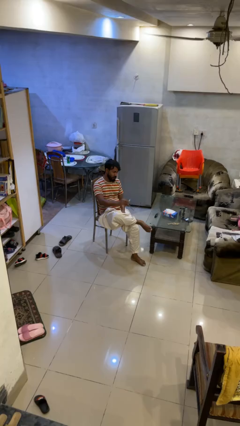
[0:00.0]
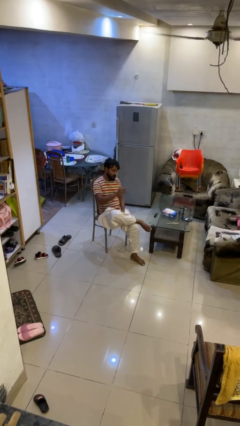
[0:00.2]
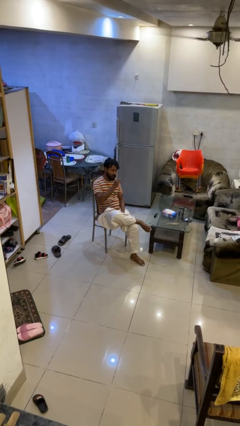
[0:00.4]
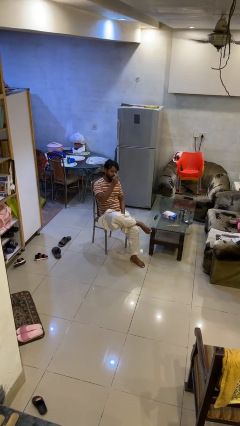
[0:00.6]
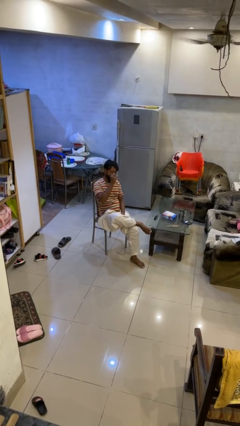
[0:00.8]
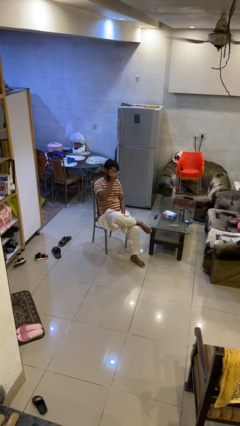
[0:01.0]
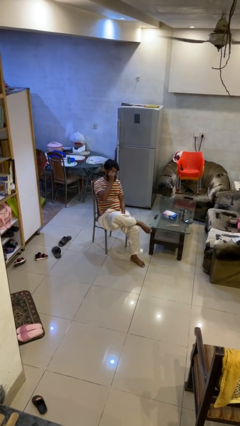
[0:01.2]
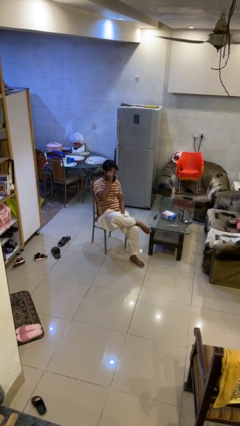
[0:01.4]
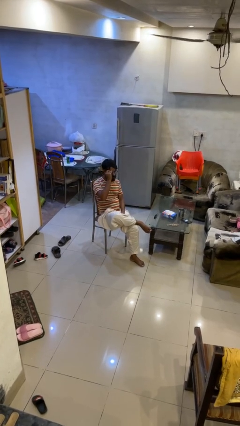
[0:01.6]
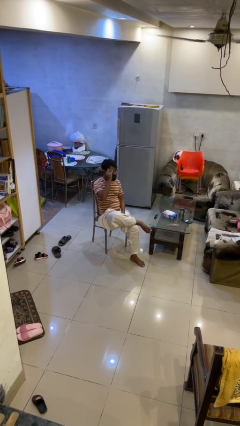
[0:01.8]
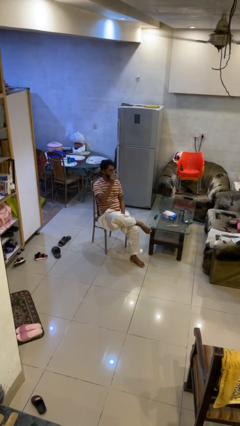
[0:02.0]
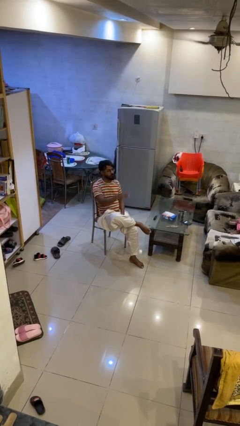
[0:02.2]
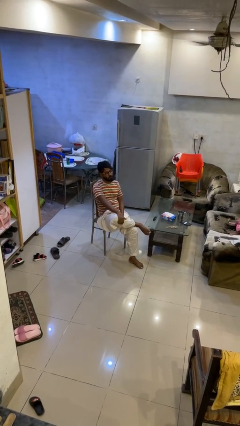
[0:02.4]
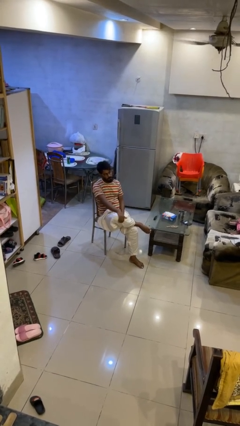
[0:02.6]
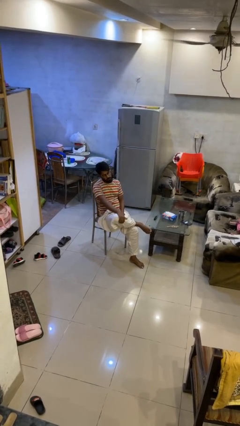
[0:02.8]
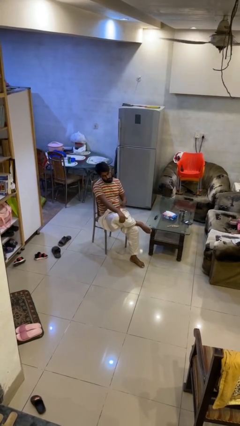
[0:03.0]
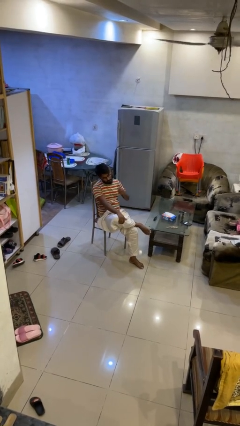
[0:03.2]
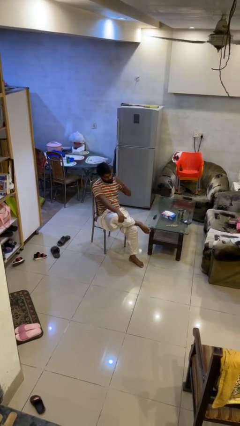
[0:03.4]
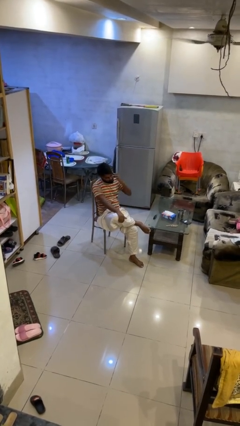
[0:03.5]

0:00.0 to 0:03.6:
person puts on glasses

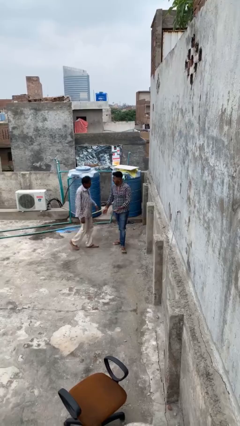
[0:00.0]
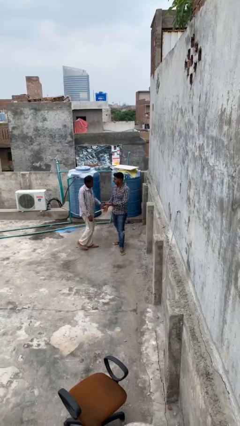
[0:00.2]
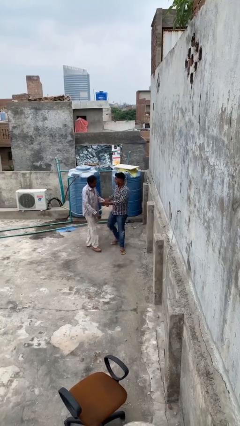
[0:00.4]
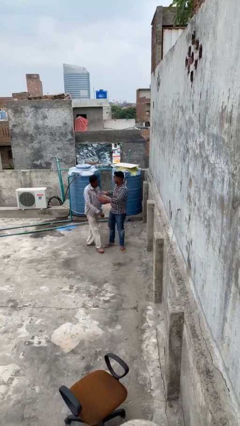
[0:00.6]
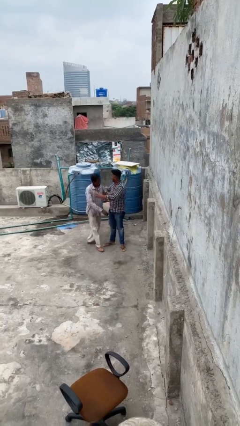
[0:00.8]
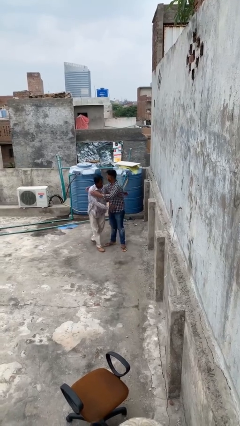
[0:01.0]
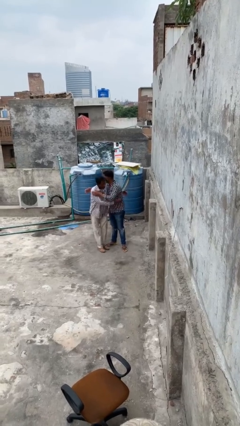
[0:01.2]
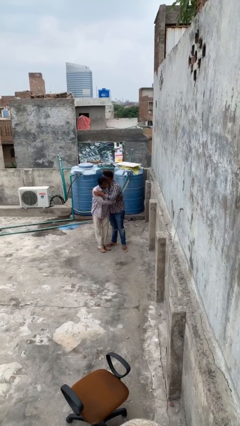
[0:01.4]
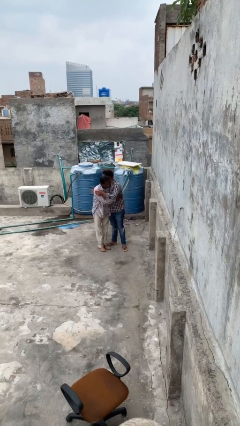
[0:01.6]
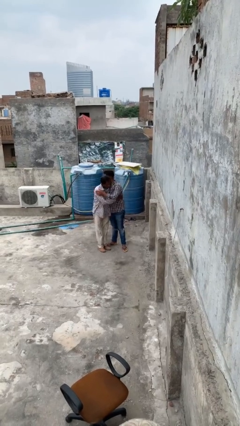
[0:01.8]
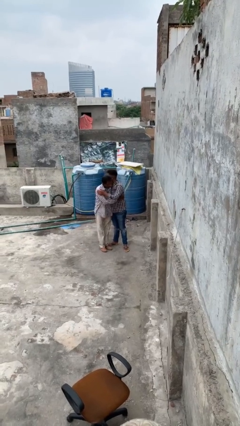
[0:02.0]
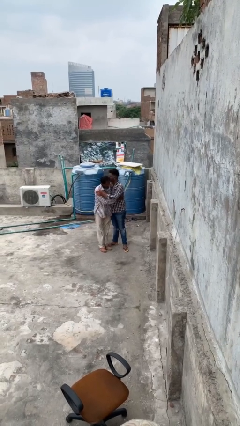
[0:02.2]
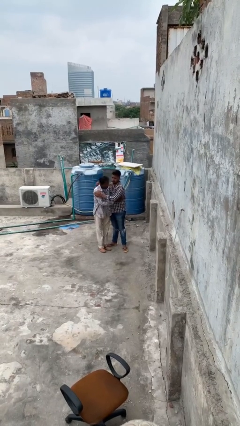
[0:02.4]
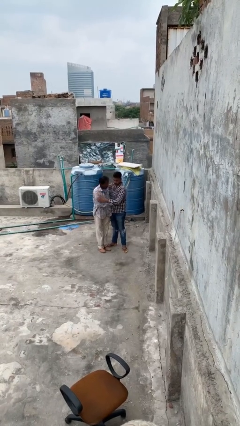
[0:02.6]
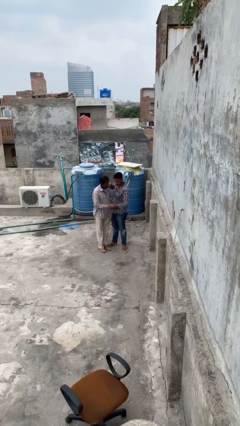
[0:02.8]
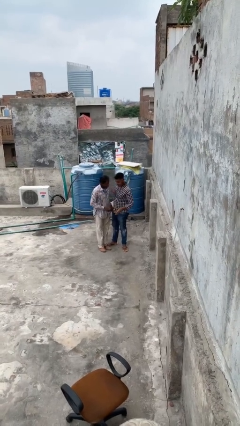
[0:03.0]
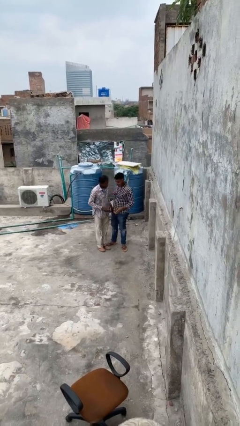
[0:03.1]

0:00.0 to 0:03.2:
person embraces person

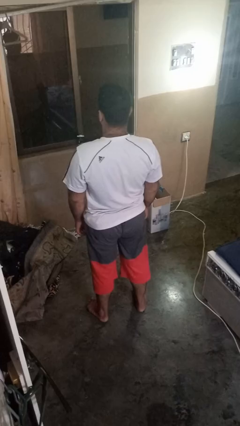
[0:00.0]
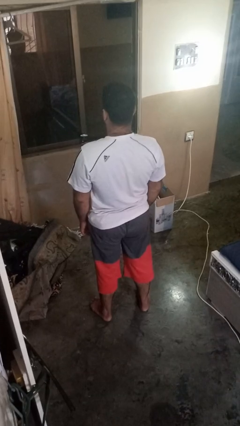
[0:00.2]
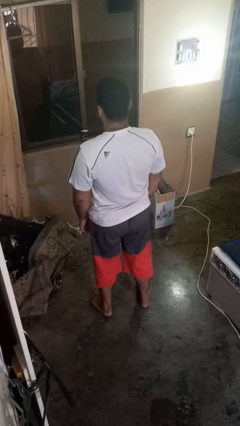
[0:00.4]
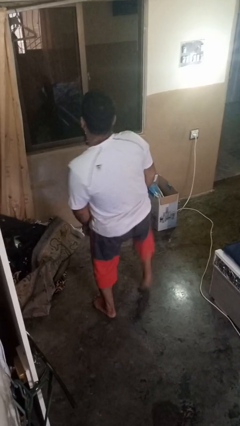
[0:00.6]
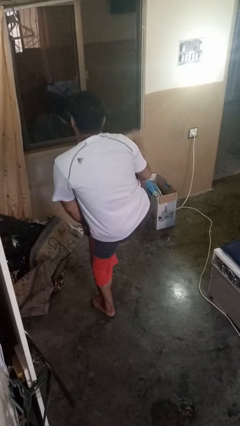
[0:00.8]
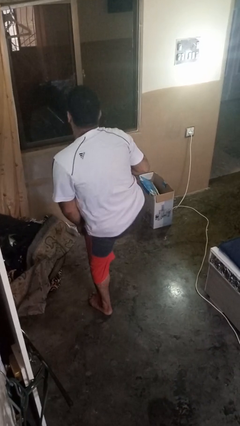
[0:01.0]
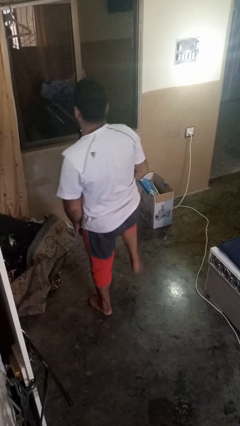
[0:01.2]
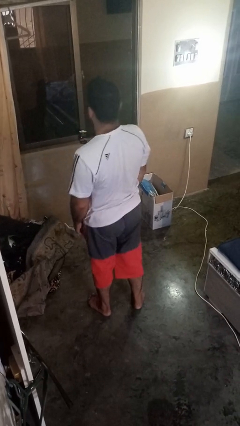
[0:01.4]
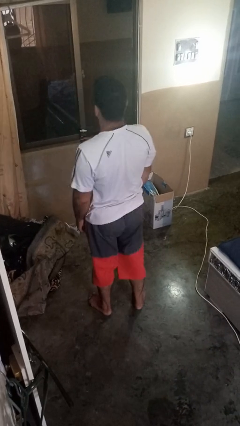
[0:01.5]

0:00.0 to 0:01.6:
person karate kicks

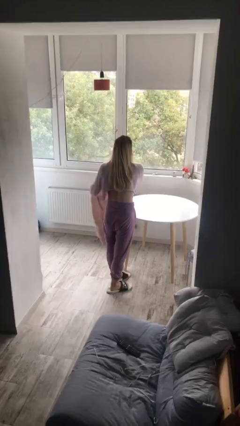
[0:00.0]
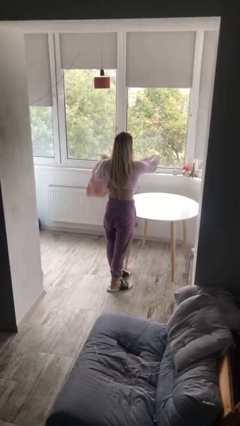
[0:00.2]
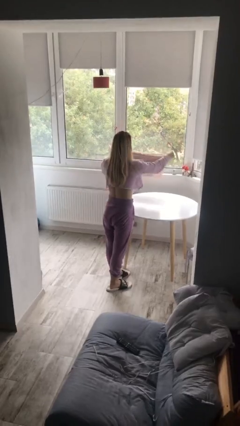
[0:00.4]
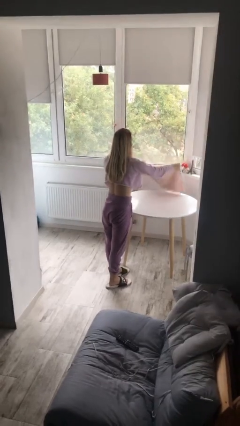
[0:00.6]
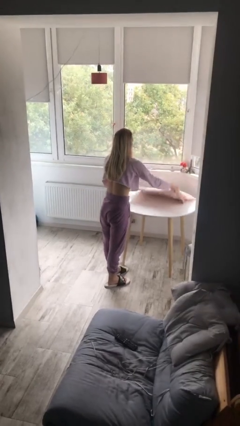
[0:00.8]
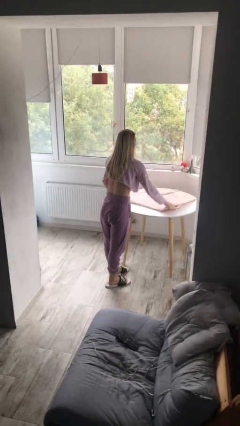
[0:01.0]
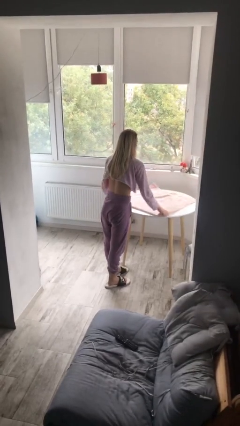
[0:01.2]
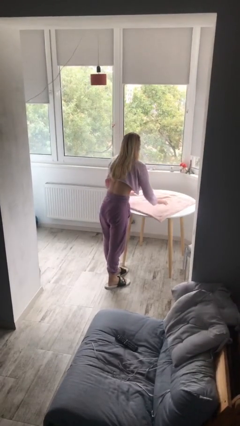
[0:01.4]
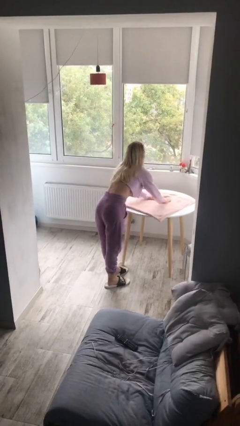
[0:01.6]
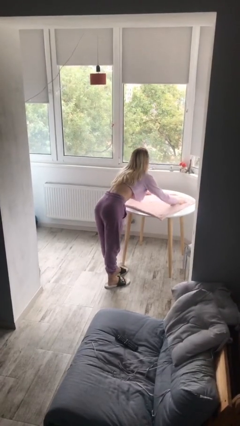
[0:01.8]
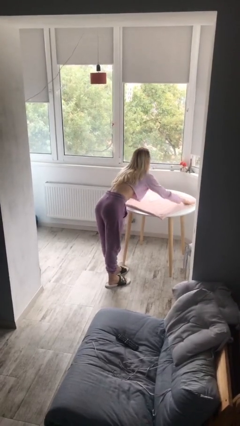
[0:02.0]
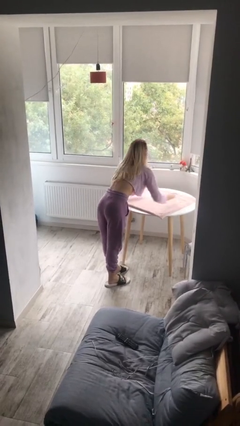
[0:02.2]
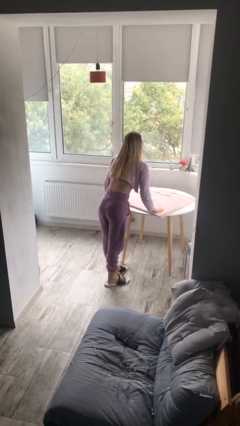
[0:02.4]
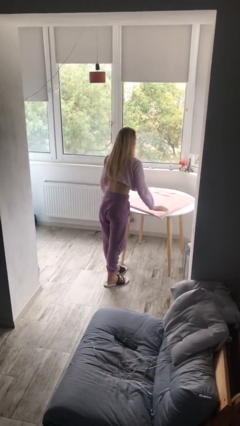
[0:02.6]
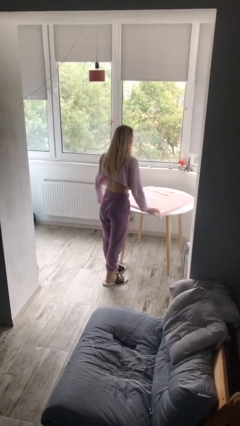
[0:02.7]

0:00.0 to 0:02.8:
person spreads tablecloth

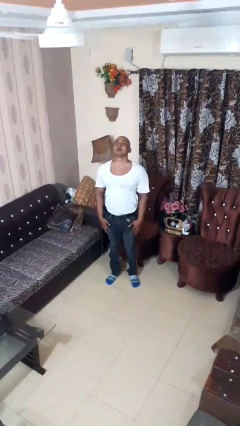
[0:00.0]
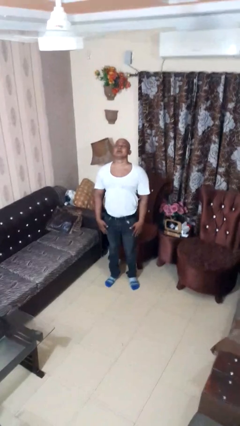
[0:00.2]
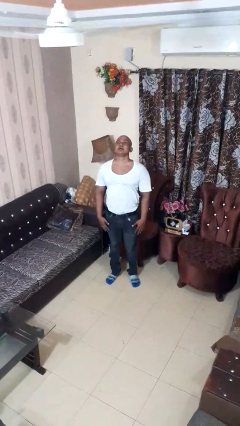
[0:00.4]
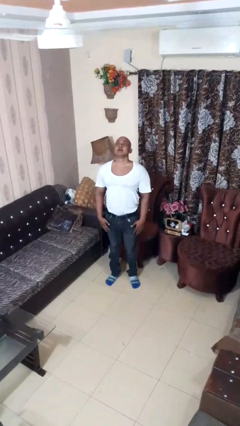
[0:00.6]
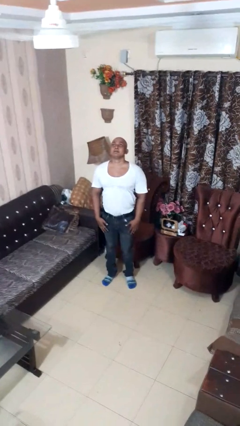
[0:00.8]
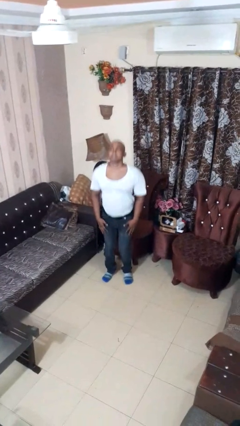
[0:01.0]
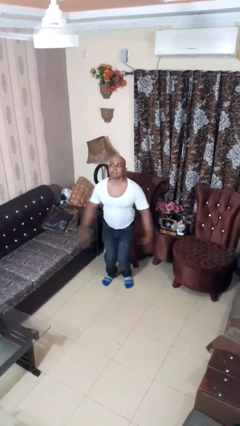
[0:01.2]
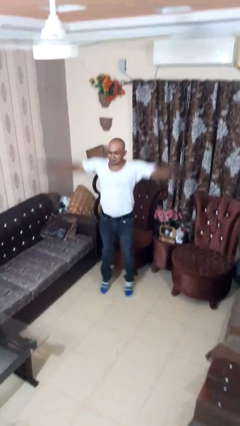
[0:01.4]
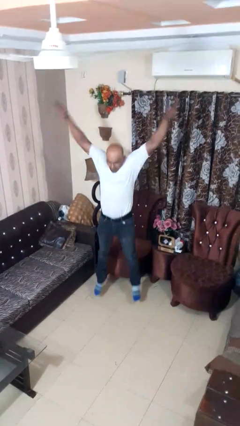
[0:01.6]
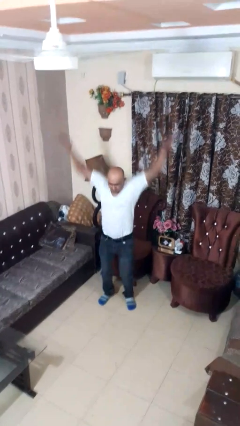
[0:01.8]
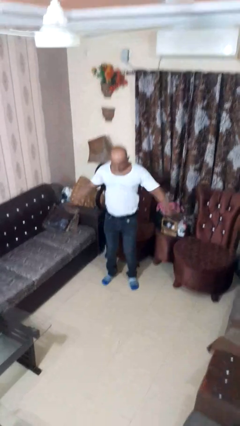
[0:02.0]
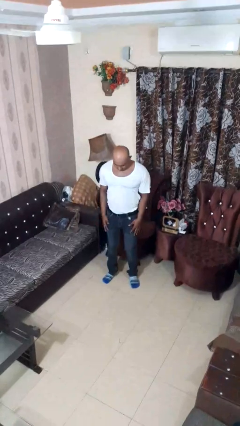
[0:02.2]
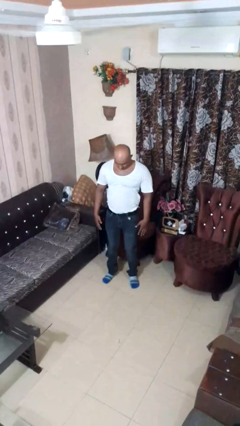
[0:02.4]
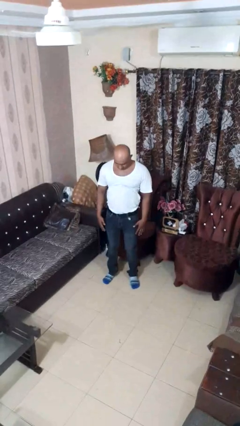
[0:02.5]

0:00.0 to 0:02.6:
person exercises with jumping jacks

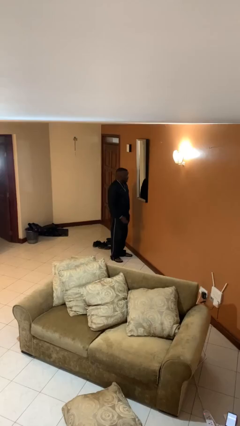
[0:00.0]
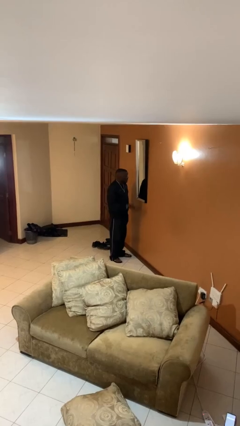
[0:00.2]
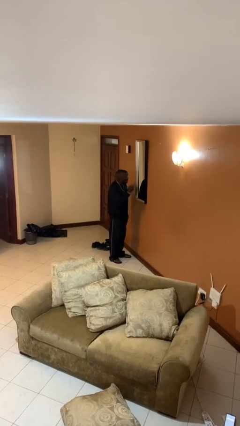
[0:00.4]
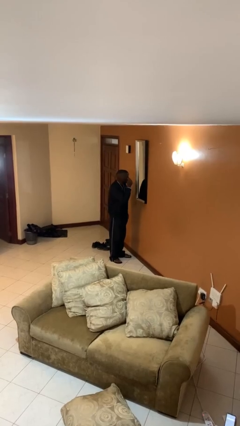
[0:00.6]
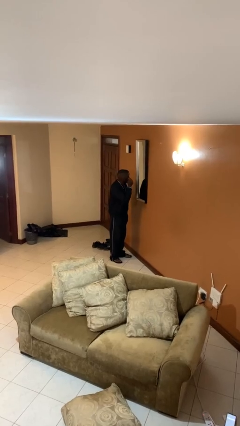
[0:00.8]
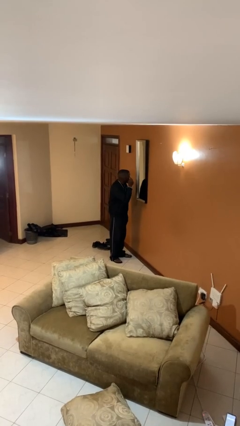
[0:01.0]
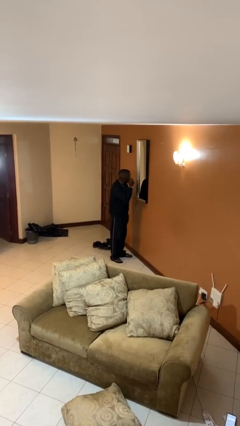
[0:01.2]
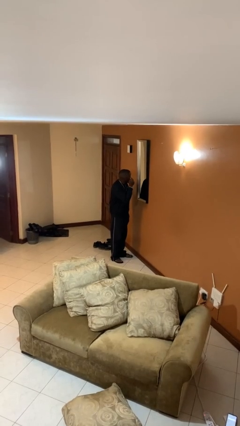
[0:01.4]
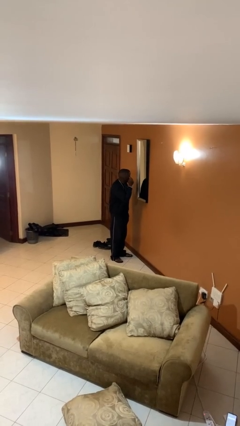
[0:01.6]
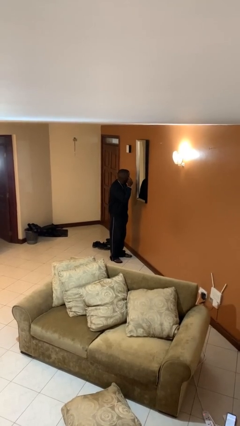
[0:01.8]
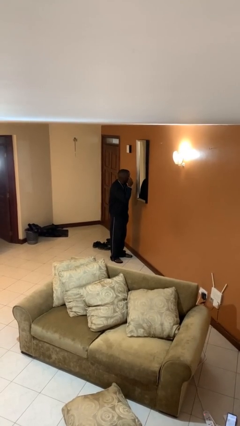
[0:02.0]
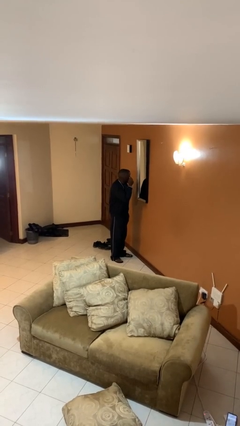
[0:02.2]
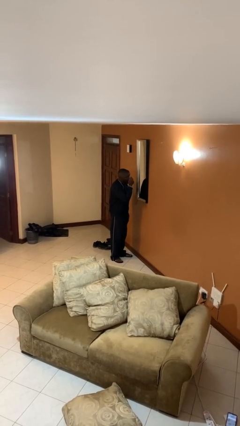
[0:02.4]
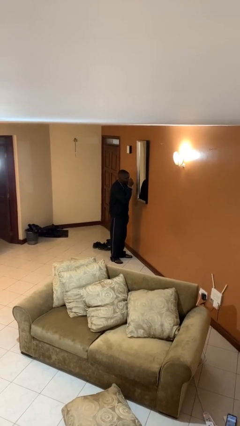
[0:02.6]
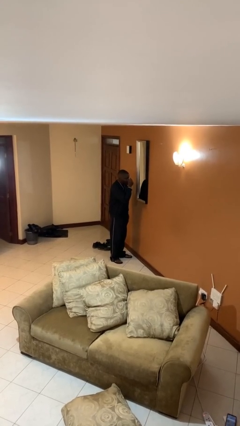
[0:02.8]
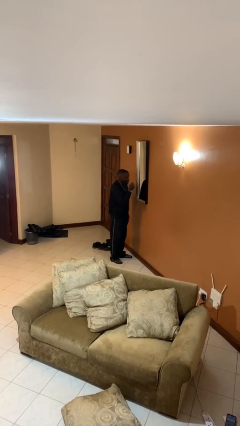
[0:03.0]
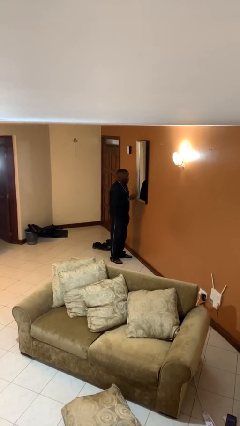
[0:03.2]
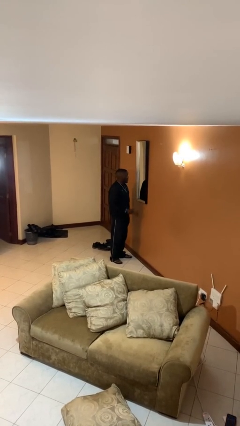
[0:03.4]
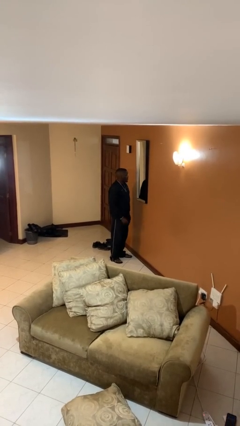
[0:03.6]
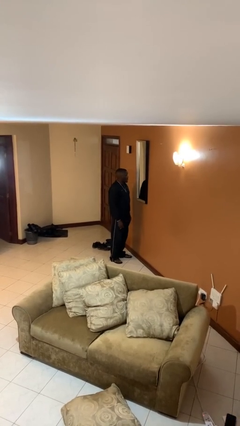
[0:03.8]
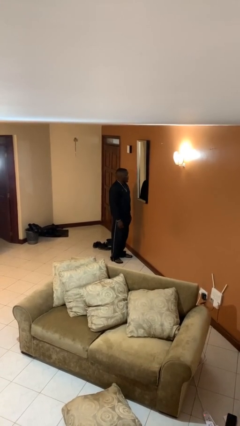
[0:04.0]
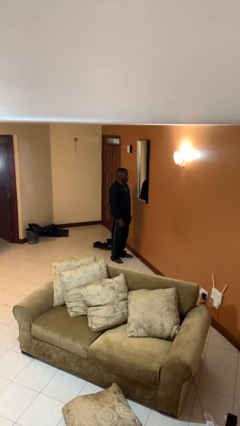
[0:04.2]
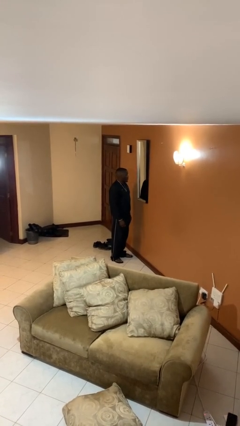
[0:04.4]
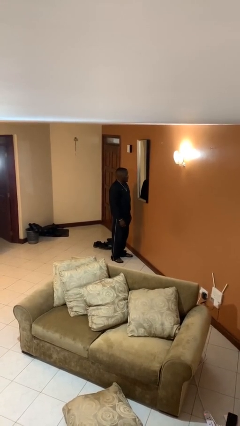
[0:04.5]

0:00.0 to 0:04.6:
person applies eye makeup
